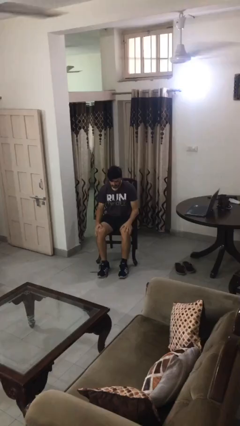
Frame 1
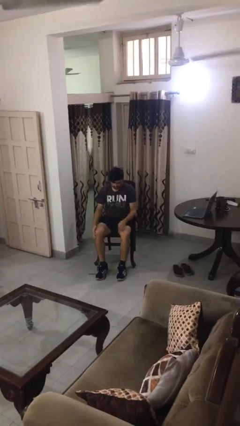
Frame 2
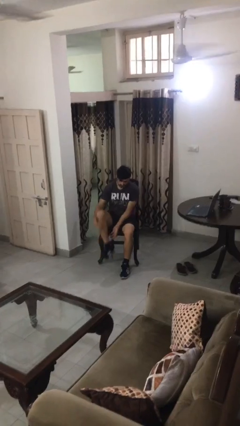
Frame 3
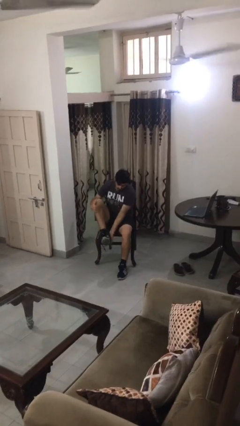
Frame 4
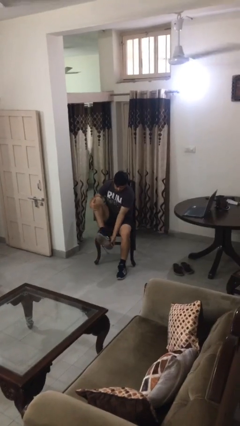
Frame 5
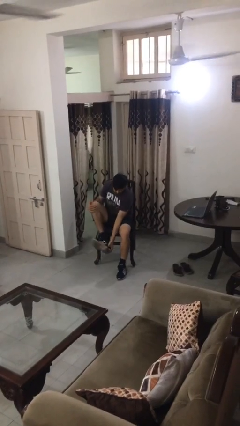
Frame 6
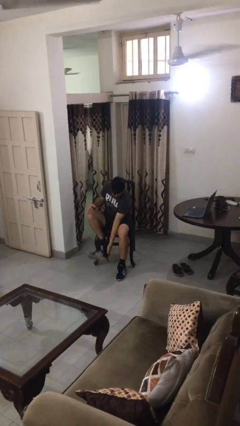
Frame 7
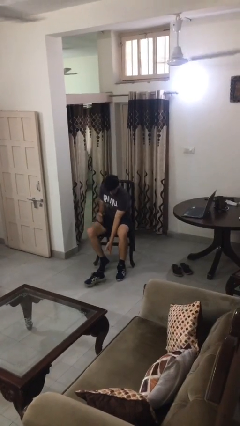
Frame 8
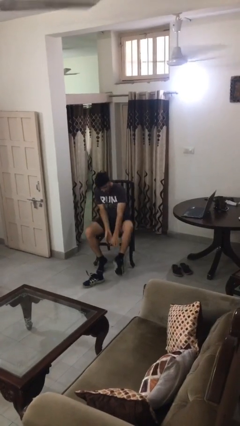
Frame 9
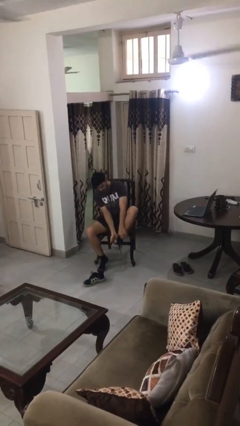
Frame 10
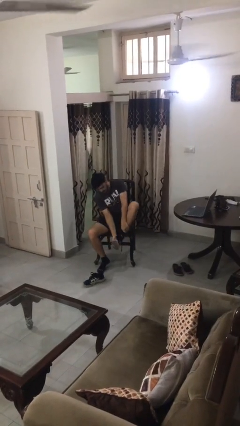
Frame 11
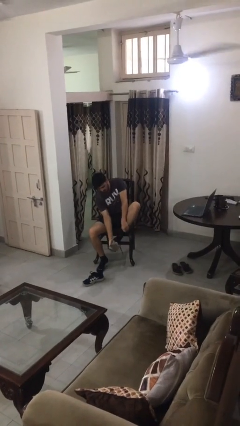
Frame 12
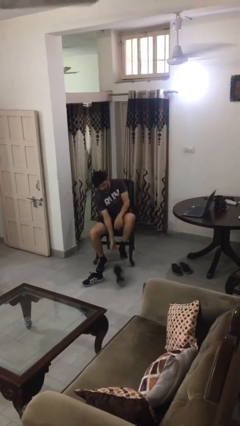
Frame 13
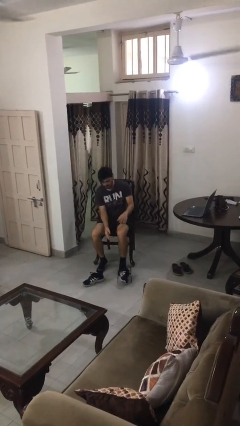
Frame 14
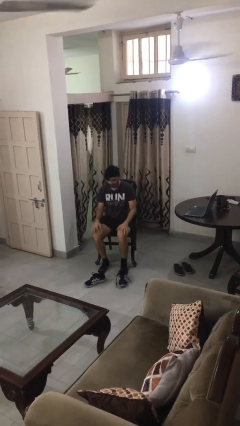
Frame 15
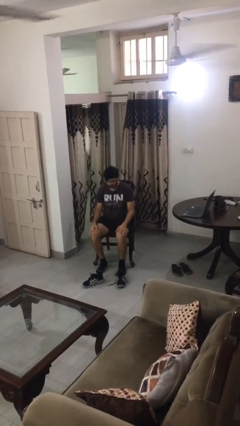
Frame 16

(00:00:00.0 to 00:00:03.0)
person takes off shoes

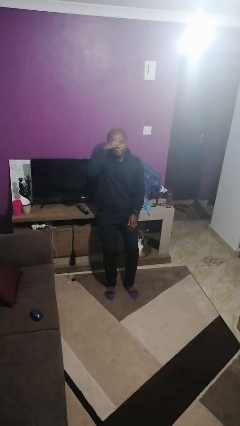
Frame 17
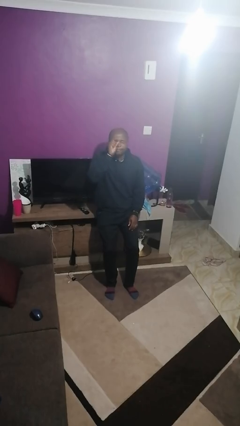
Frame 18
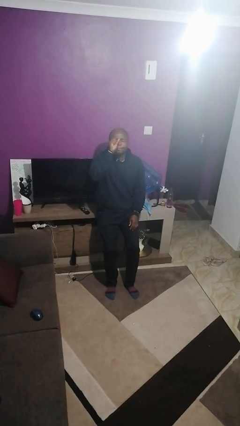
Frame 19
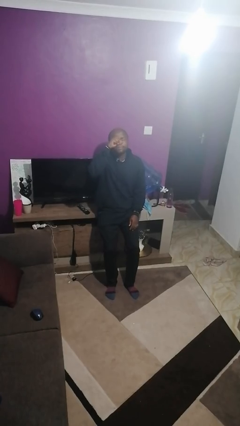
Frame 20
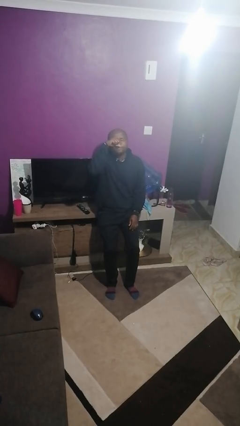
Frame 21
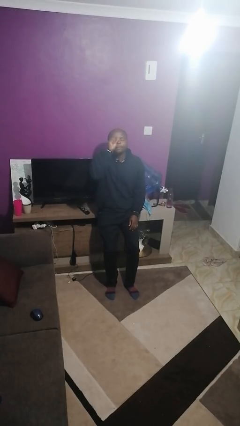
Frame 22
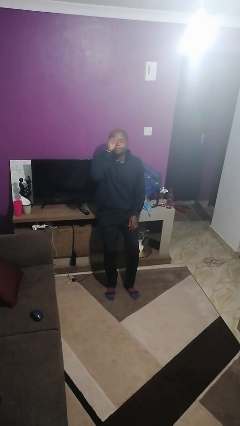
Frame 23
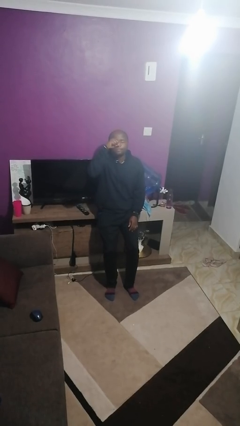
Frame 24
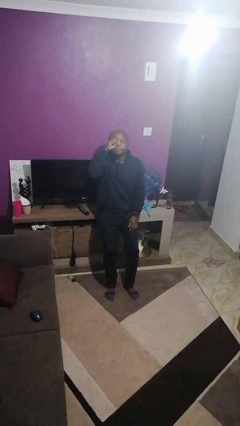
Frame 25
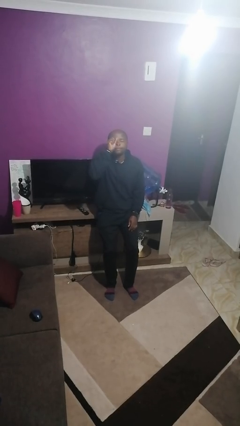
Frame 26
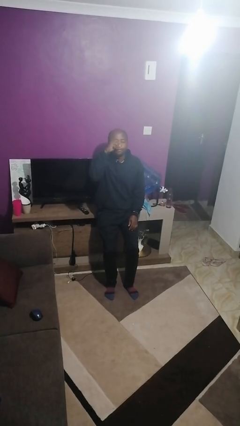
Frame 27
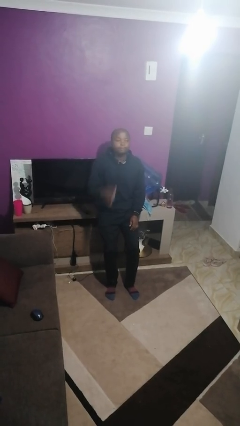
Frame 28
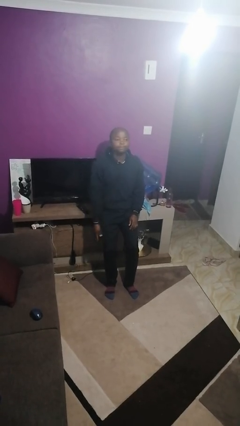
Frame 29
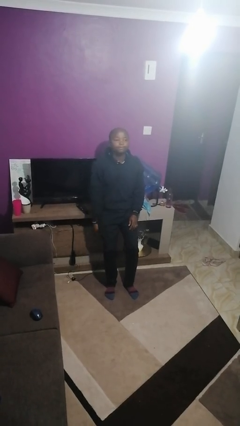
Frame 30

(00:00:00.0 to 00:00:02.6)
person rubs eyes

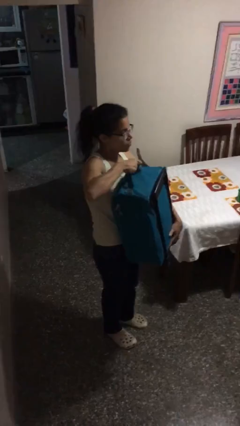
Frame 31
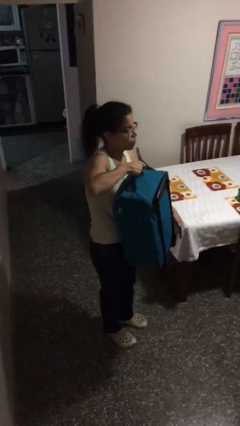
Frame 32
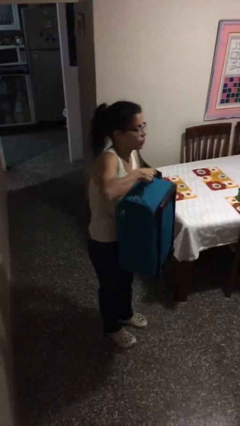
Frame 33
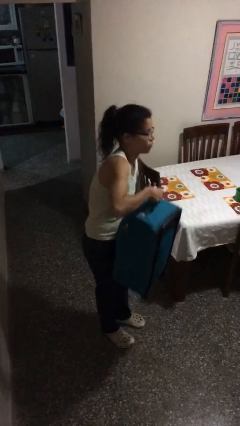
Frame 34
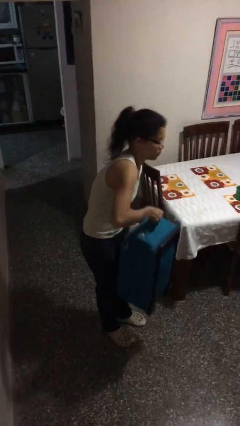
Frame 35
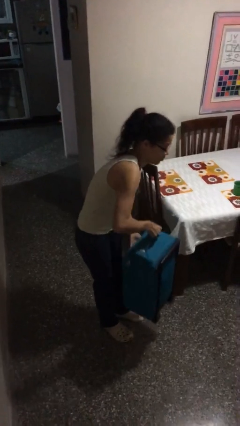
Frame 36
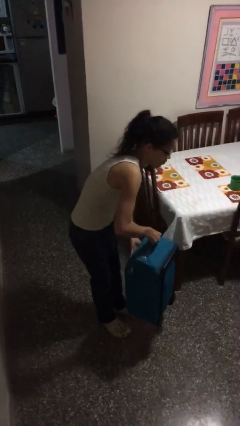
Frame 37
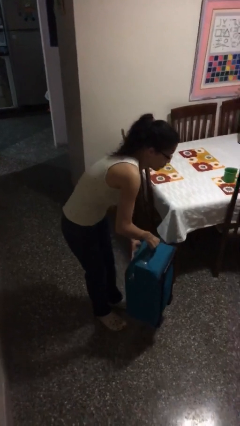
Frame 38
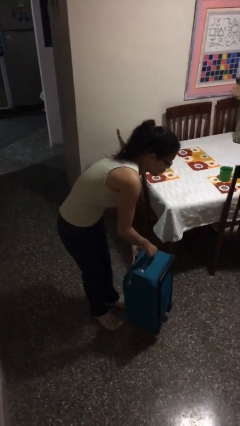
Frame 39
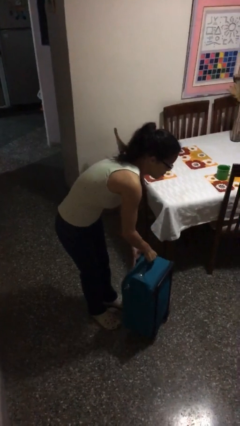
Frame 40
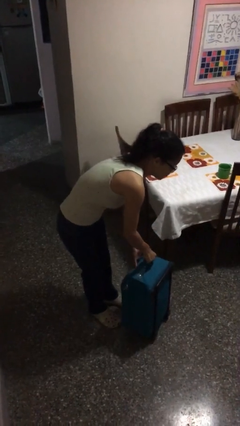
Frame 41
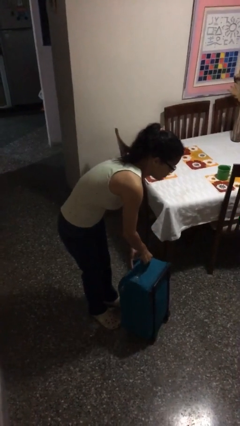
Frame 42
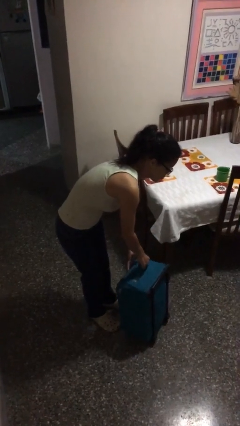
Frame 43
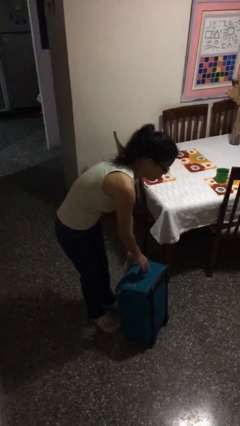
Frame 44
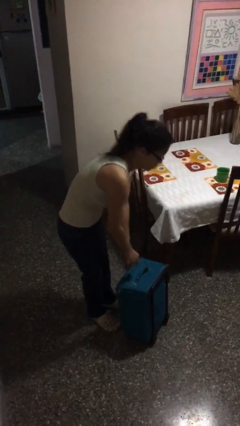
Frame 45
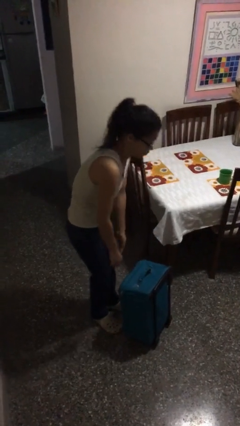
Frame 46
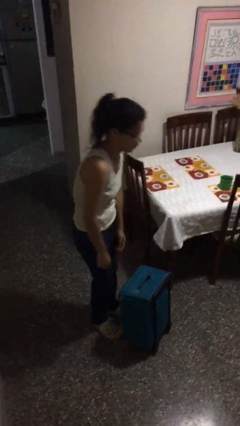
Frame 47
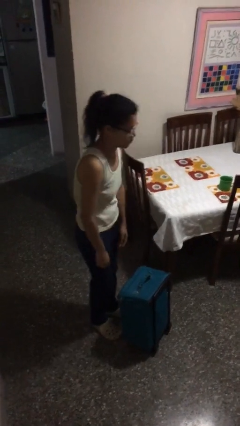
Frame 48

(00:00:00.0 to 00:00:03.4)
person puts down object on floor

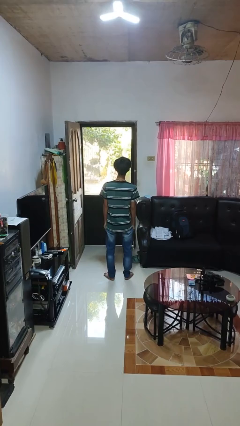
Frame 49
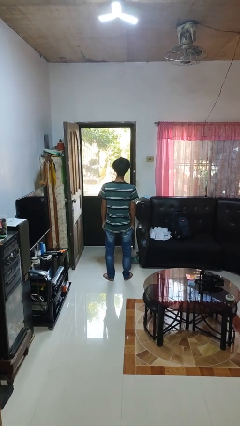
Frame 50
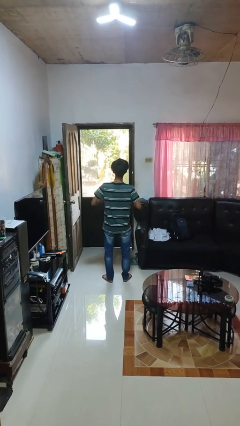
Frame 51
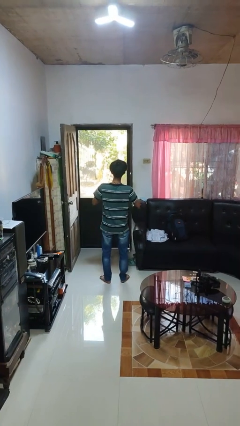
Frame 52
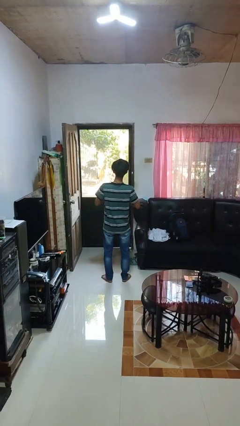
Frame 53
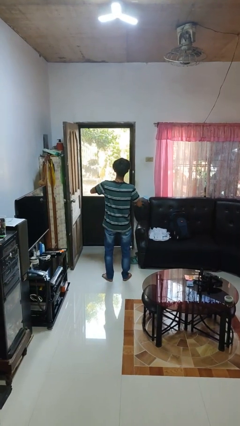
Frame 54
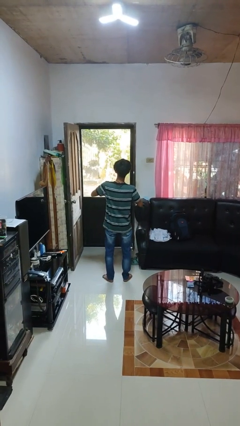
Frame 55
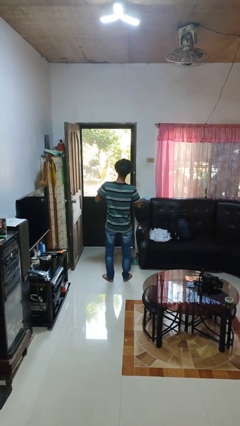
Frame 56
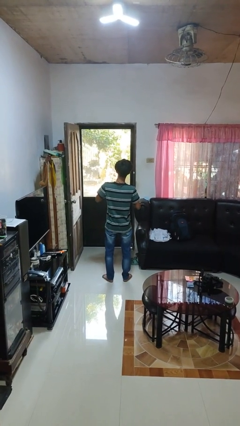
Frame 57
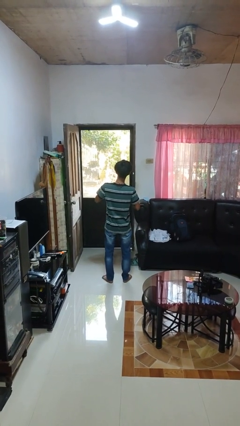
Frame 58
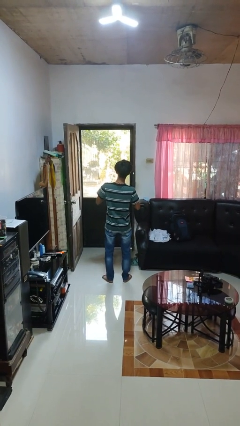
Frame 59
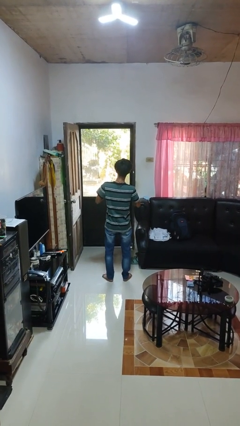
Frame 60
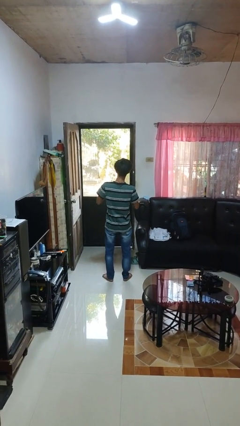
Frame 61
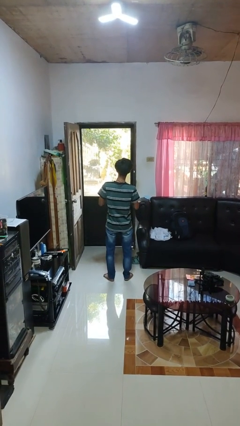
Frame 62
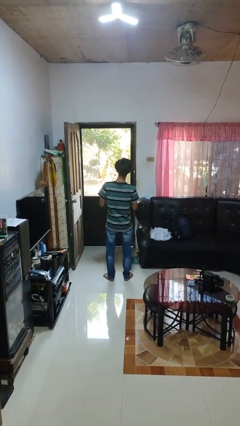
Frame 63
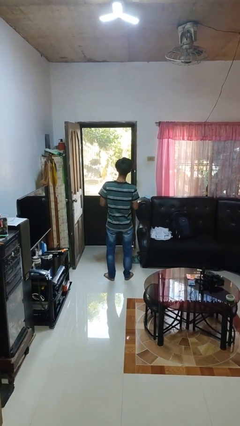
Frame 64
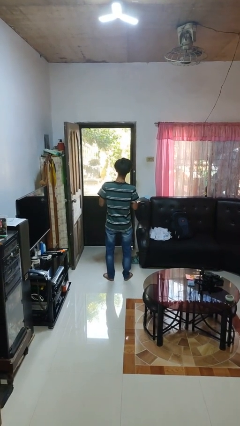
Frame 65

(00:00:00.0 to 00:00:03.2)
person buttons shirt

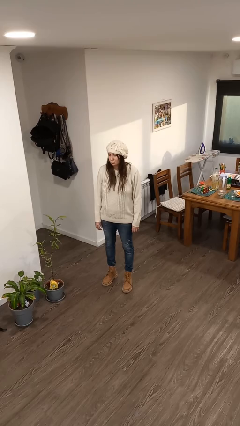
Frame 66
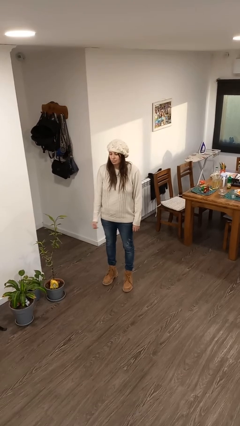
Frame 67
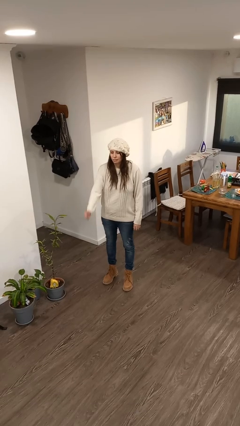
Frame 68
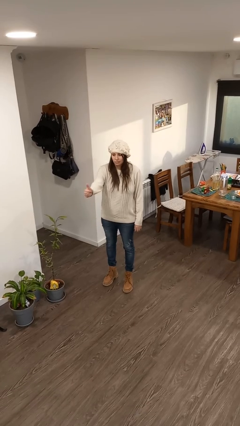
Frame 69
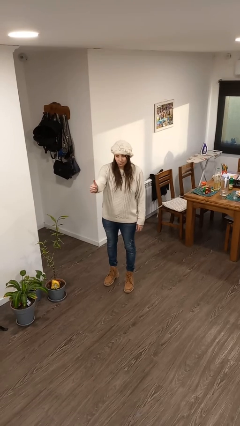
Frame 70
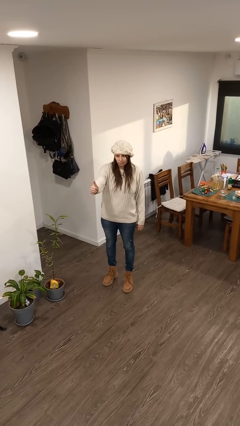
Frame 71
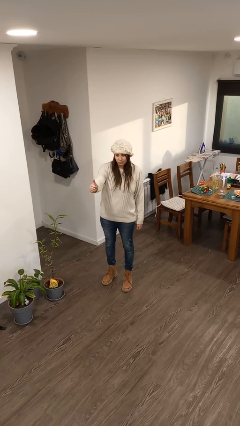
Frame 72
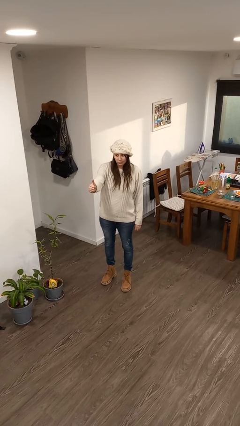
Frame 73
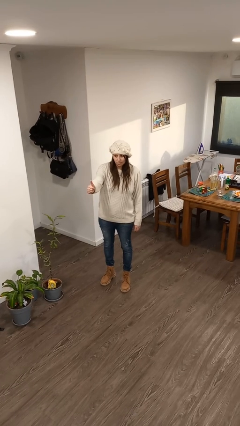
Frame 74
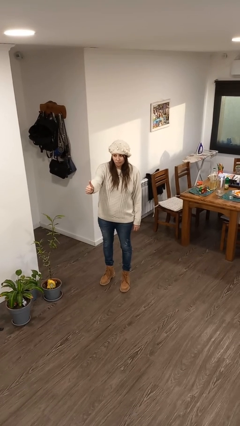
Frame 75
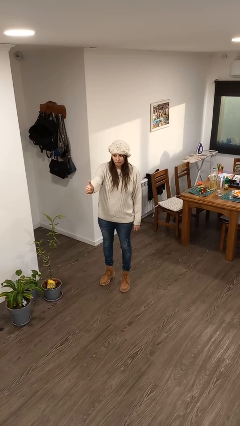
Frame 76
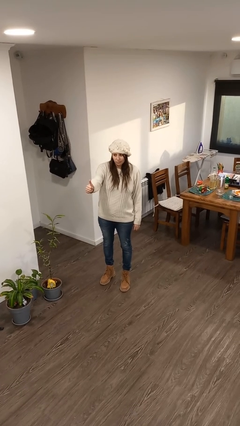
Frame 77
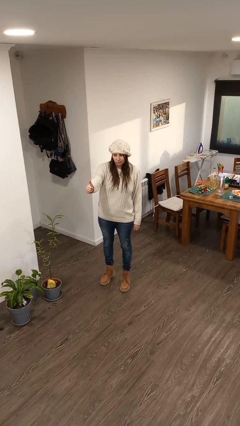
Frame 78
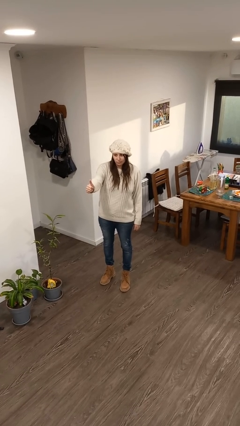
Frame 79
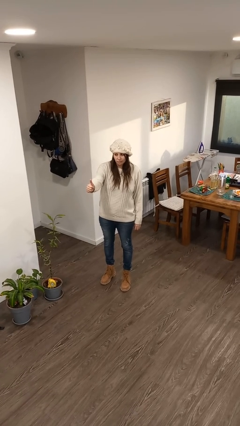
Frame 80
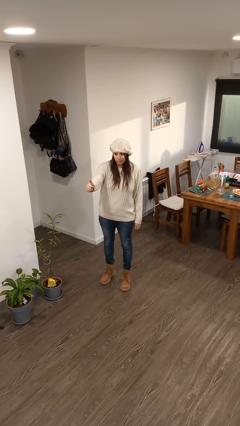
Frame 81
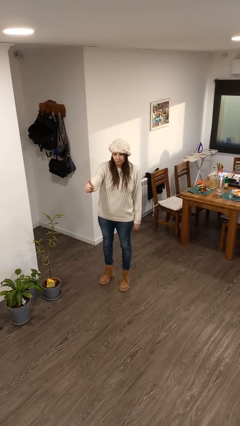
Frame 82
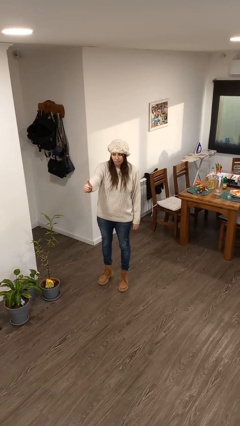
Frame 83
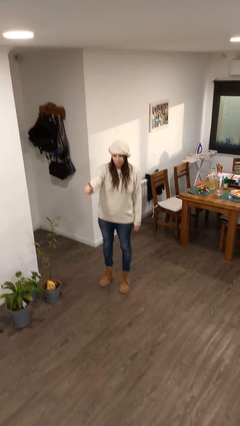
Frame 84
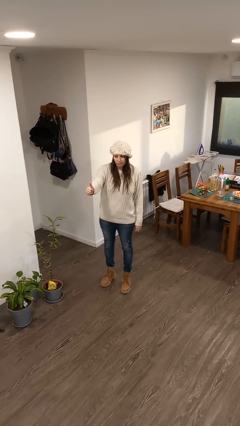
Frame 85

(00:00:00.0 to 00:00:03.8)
person gestures thumbs up

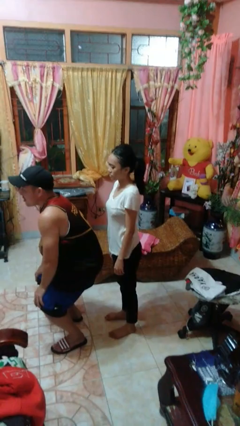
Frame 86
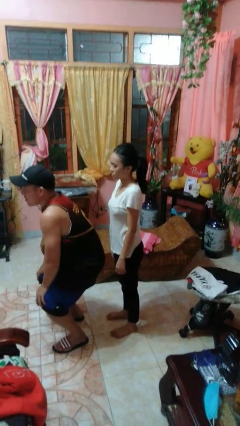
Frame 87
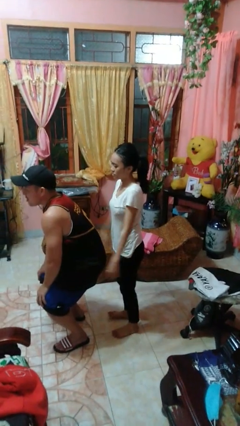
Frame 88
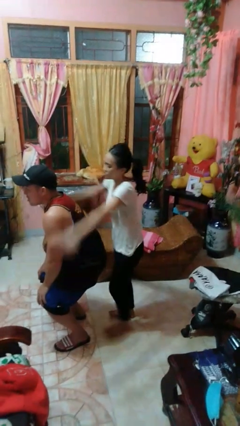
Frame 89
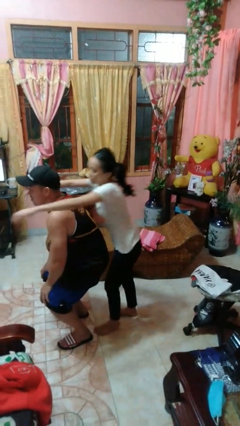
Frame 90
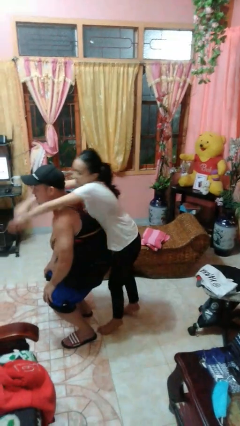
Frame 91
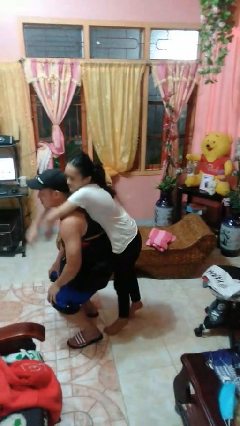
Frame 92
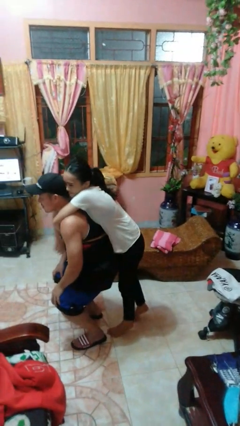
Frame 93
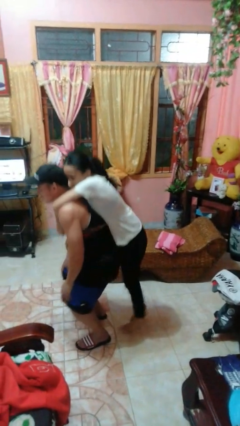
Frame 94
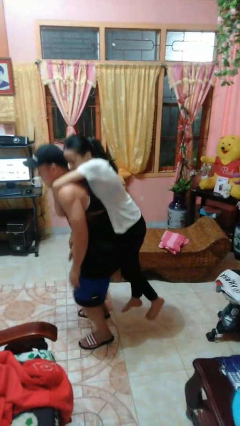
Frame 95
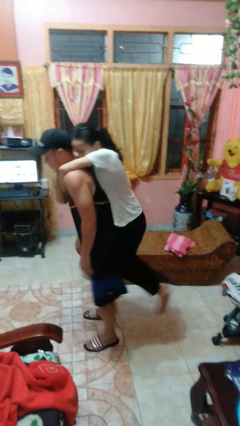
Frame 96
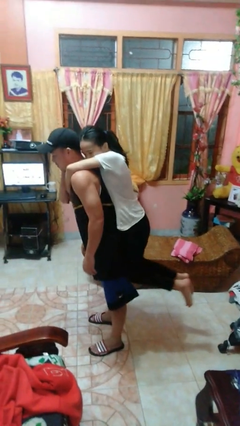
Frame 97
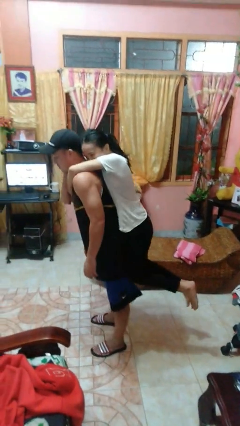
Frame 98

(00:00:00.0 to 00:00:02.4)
person picks up person
